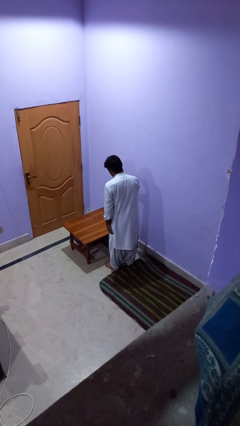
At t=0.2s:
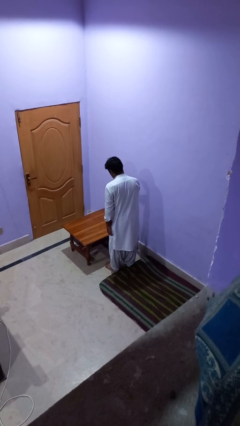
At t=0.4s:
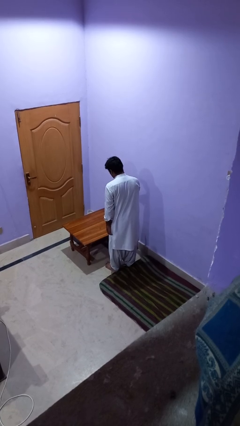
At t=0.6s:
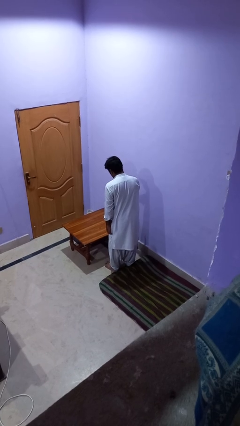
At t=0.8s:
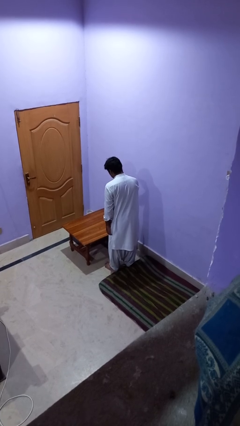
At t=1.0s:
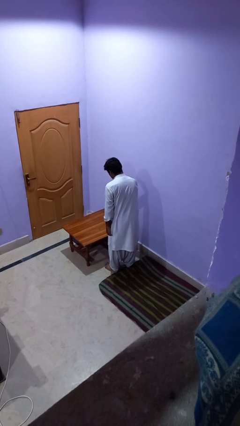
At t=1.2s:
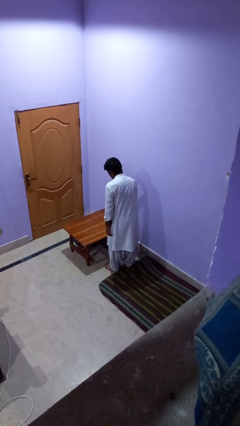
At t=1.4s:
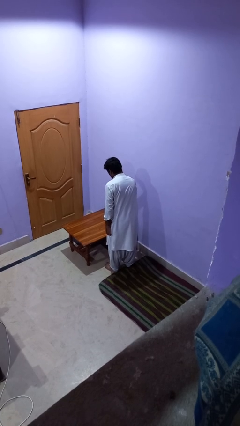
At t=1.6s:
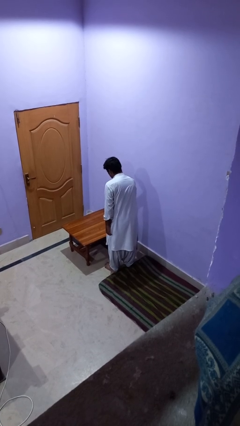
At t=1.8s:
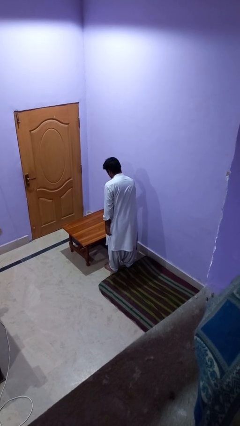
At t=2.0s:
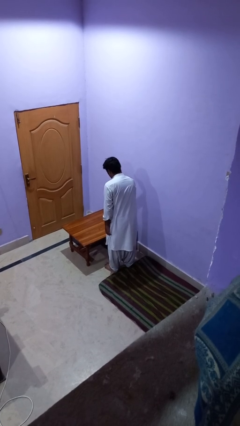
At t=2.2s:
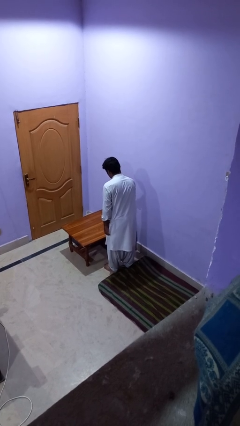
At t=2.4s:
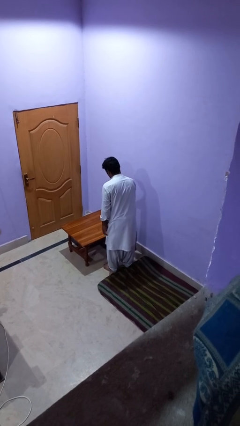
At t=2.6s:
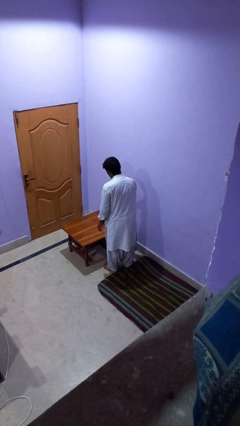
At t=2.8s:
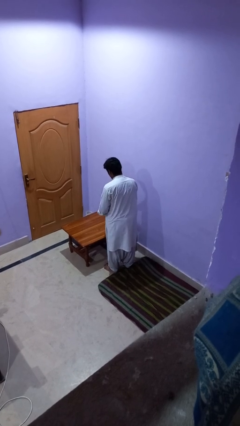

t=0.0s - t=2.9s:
person sprays from bottle

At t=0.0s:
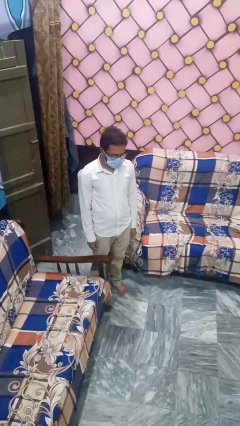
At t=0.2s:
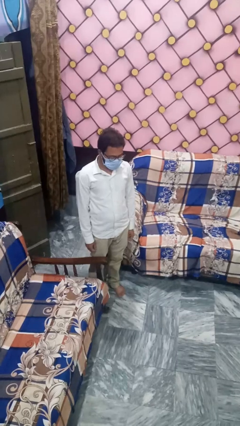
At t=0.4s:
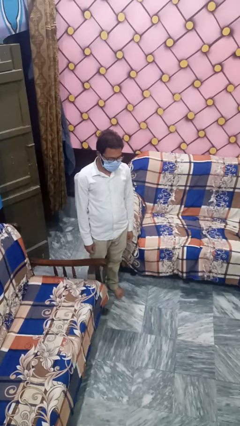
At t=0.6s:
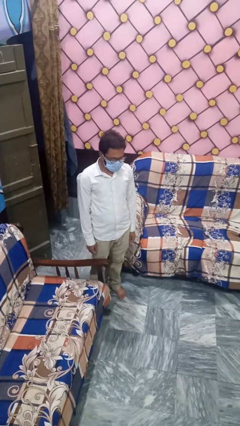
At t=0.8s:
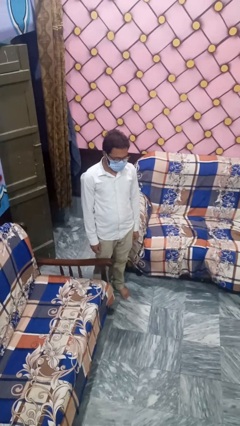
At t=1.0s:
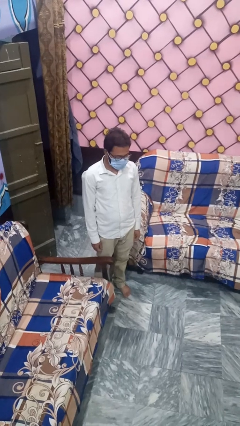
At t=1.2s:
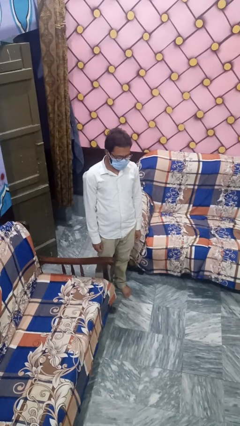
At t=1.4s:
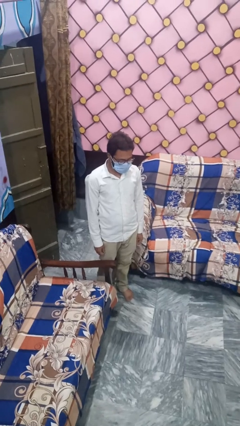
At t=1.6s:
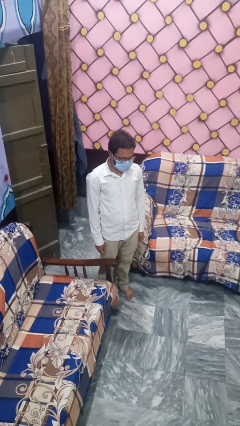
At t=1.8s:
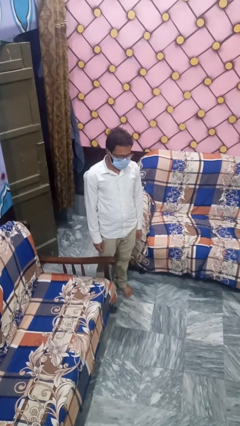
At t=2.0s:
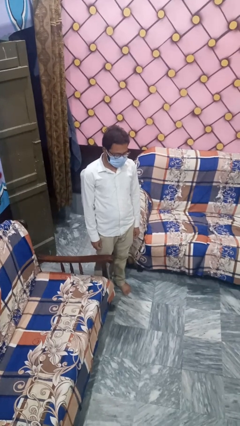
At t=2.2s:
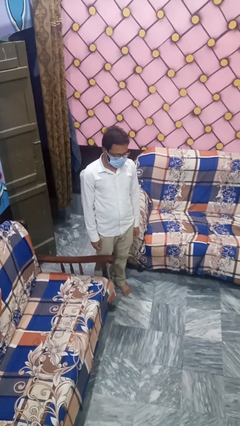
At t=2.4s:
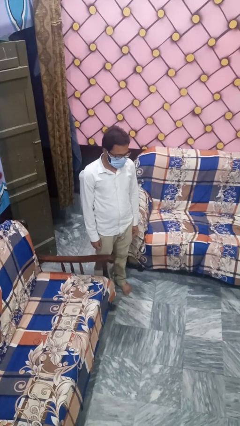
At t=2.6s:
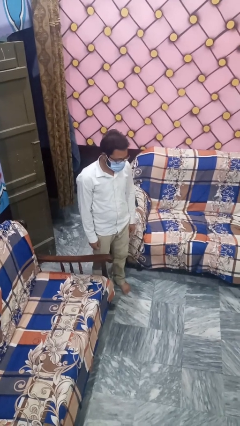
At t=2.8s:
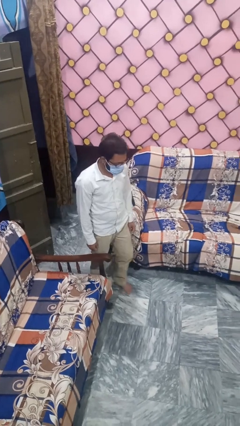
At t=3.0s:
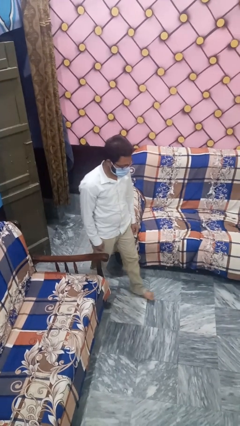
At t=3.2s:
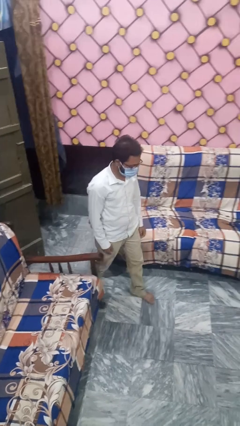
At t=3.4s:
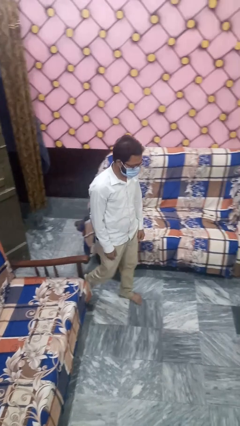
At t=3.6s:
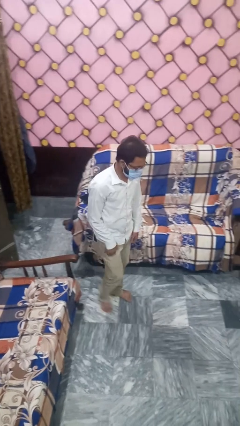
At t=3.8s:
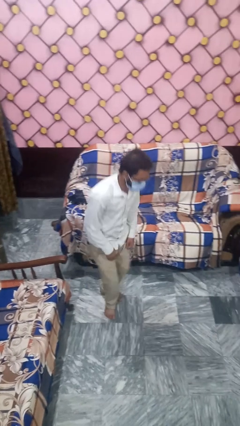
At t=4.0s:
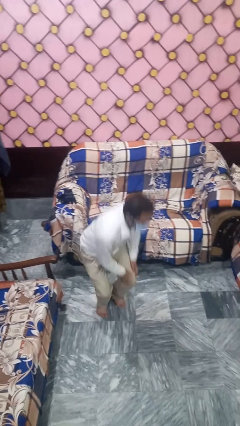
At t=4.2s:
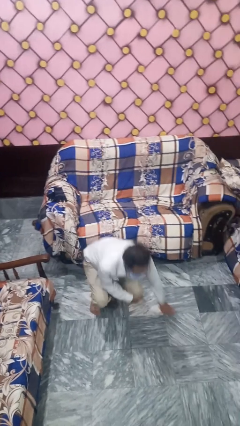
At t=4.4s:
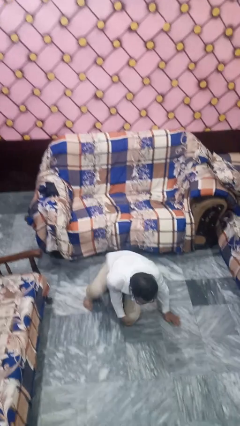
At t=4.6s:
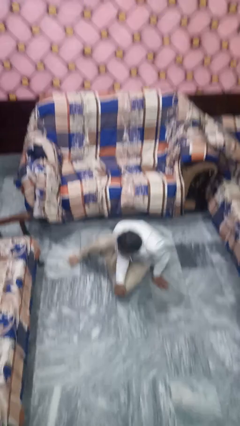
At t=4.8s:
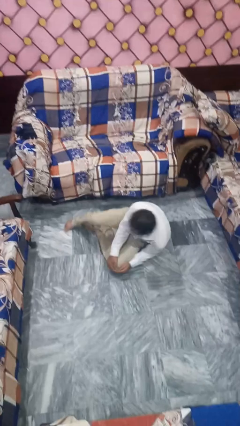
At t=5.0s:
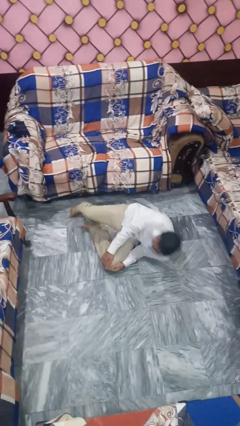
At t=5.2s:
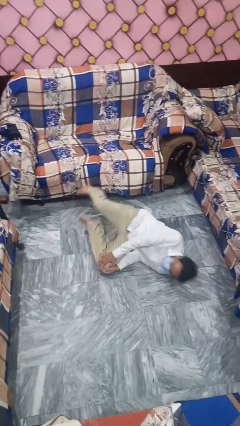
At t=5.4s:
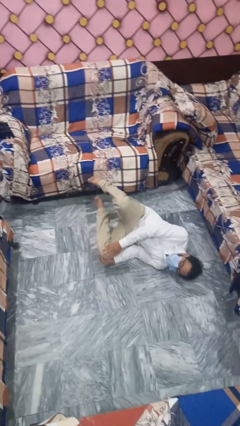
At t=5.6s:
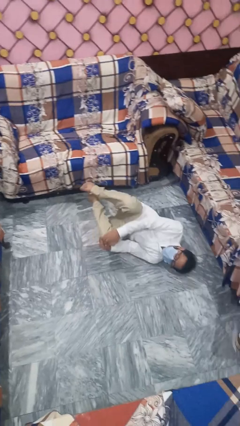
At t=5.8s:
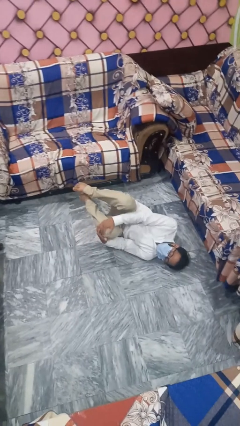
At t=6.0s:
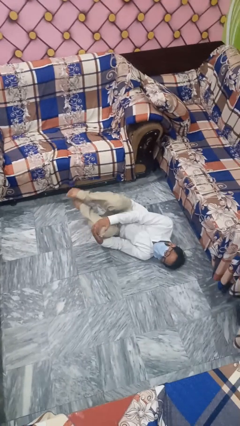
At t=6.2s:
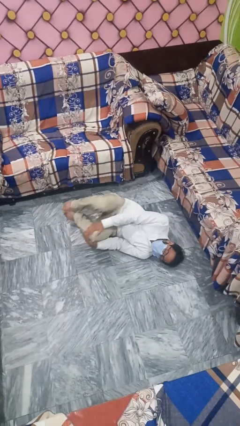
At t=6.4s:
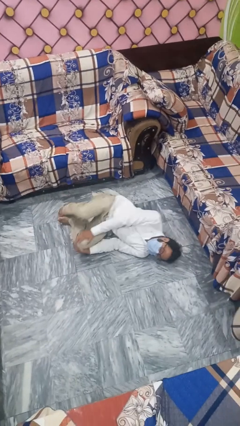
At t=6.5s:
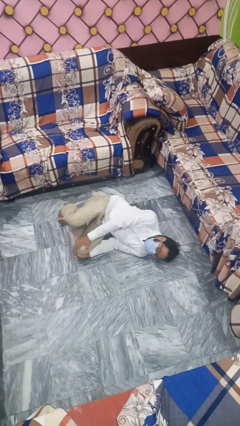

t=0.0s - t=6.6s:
person trips on object on floor

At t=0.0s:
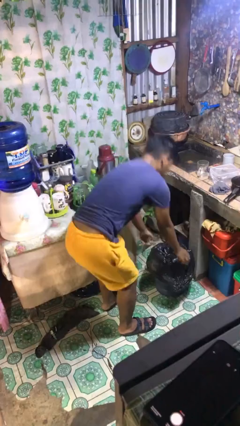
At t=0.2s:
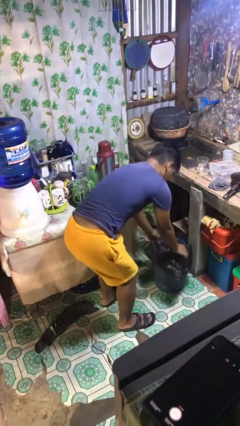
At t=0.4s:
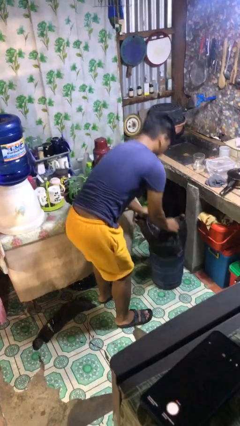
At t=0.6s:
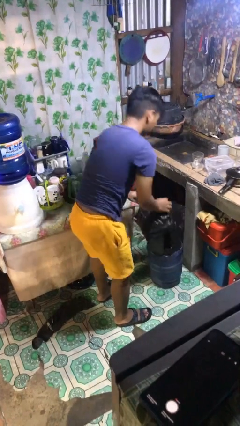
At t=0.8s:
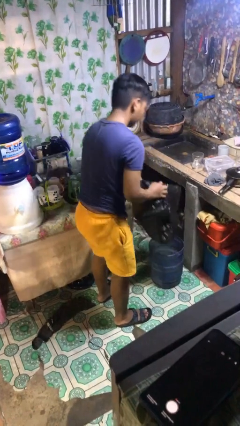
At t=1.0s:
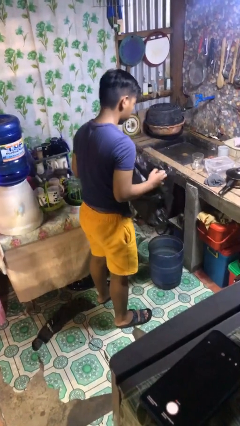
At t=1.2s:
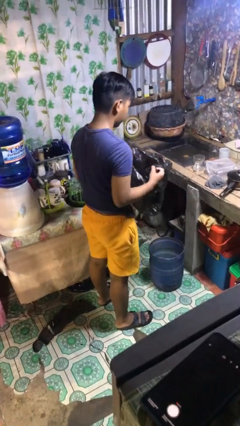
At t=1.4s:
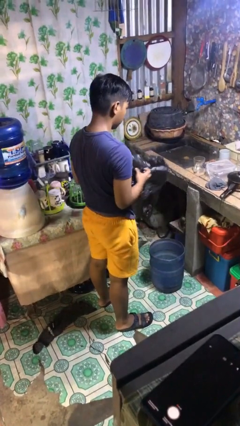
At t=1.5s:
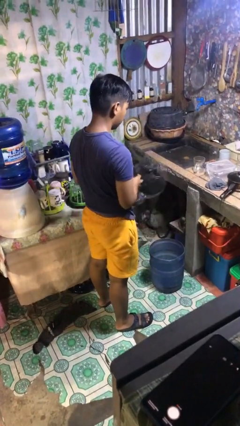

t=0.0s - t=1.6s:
person removes trashbag from trashcan

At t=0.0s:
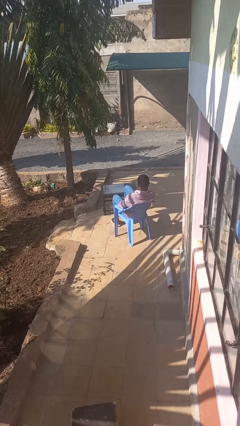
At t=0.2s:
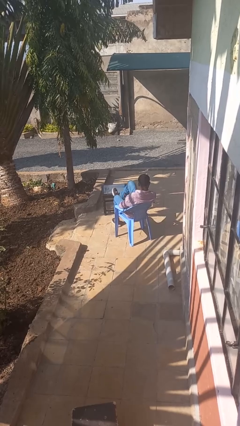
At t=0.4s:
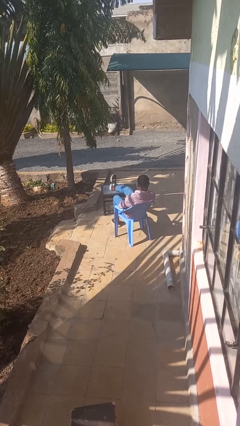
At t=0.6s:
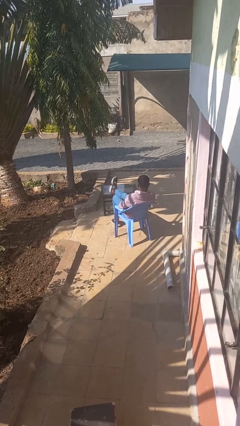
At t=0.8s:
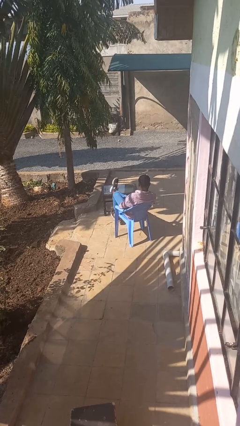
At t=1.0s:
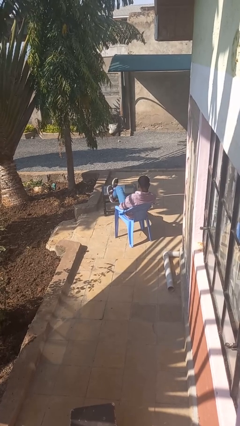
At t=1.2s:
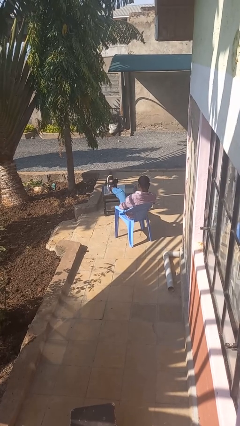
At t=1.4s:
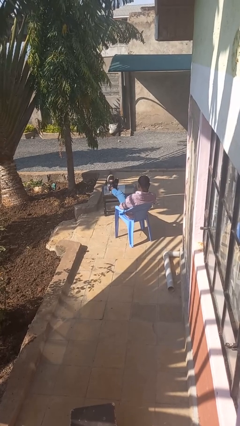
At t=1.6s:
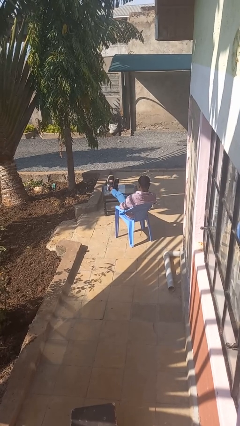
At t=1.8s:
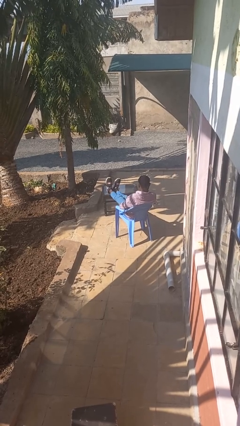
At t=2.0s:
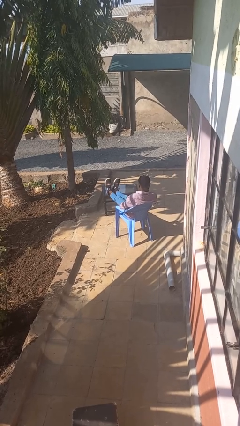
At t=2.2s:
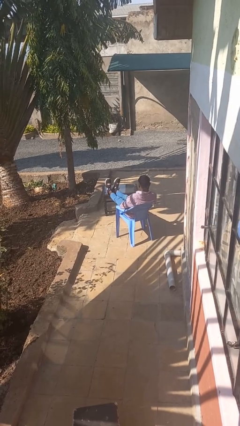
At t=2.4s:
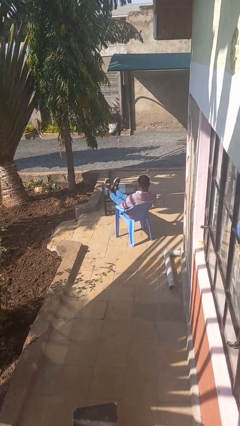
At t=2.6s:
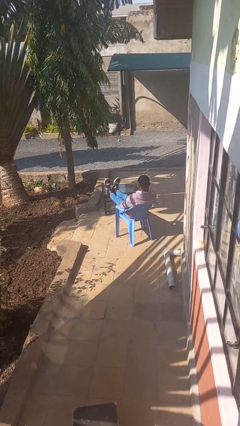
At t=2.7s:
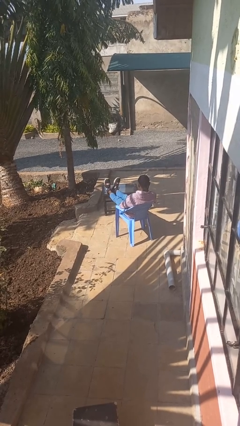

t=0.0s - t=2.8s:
person puts feet up

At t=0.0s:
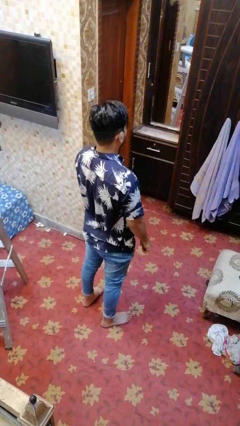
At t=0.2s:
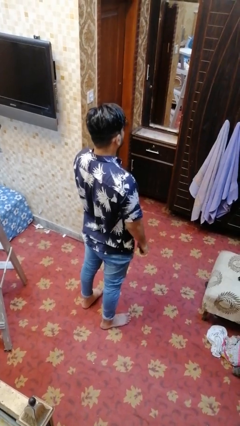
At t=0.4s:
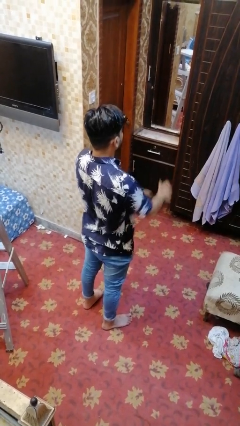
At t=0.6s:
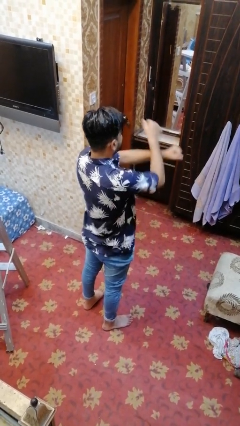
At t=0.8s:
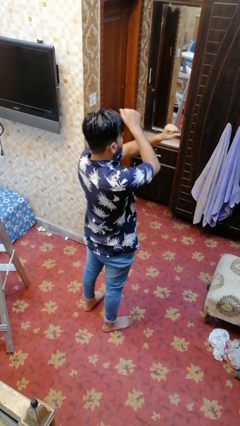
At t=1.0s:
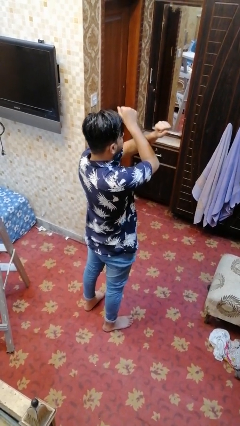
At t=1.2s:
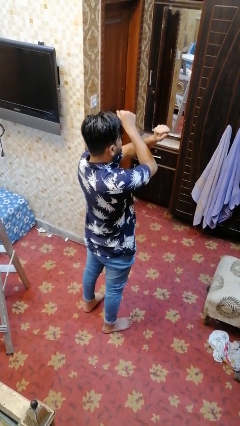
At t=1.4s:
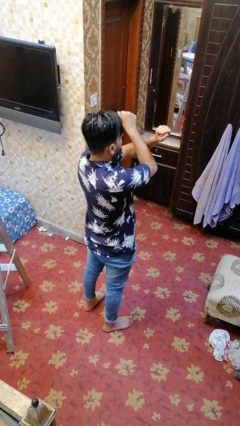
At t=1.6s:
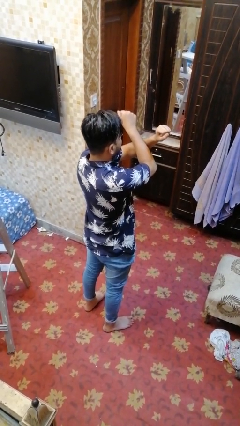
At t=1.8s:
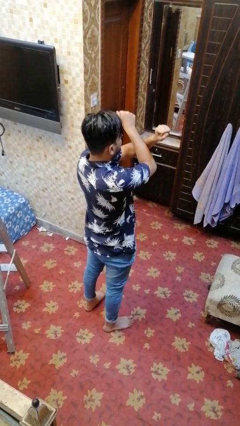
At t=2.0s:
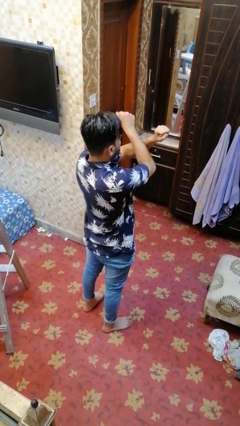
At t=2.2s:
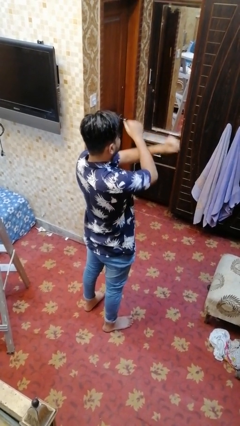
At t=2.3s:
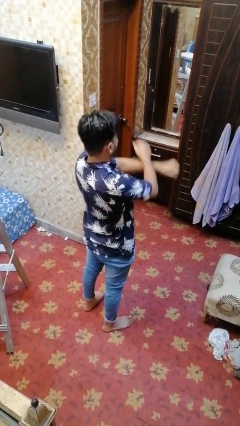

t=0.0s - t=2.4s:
person crosses arms

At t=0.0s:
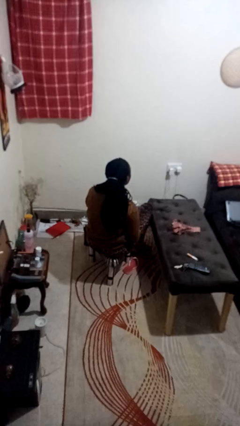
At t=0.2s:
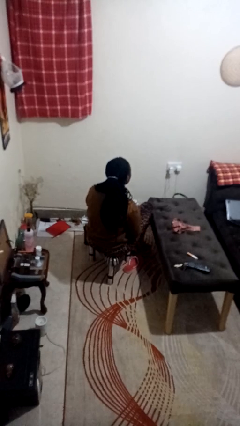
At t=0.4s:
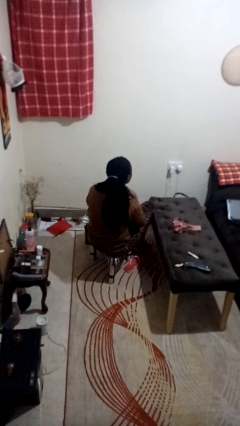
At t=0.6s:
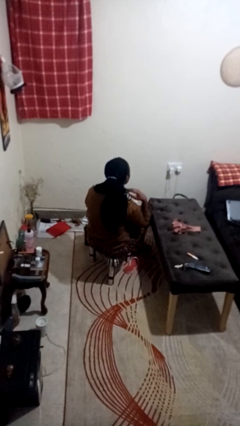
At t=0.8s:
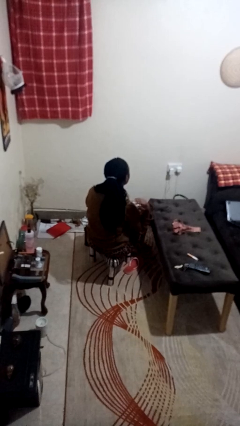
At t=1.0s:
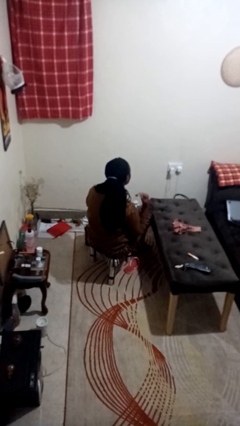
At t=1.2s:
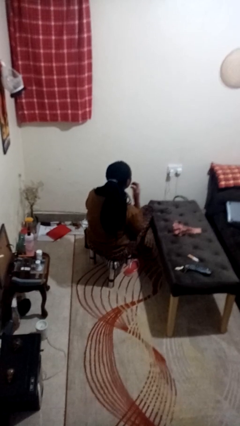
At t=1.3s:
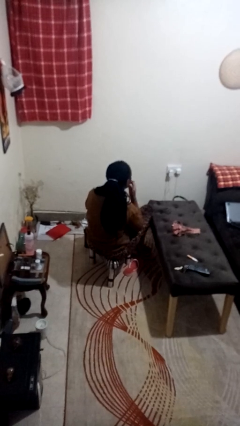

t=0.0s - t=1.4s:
person gestures cut
